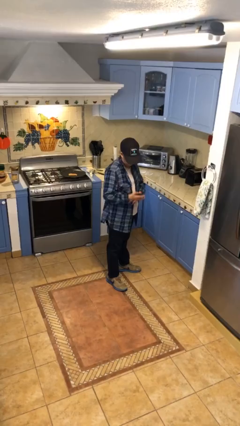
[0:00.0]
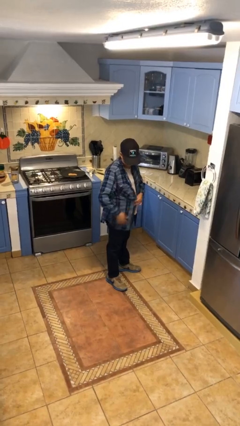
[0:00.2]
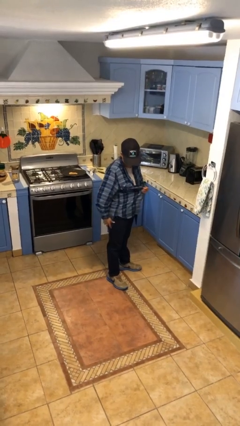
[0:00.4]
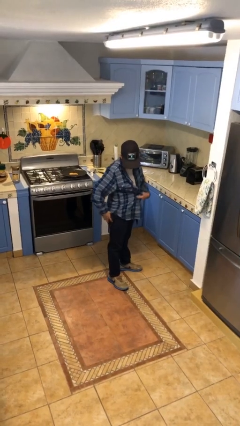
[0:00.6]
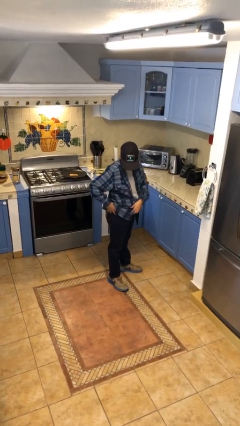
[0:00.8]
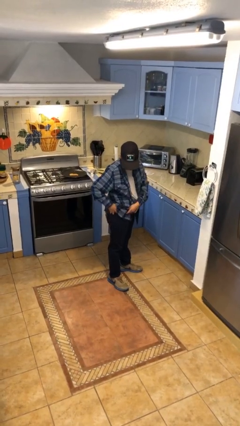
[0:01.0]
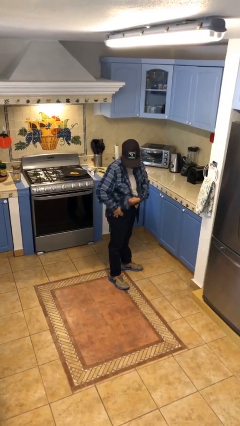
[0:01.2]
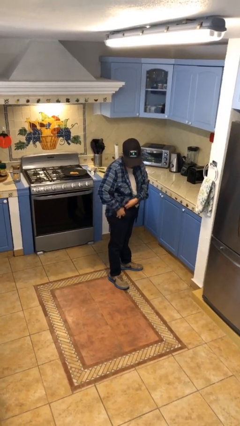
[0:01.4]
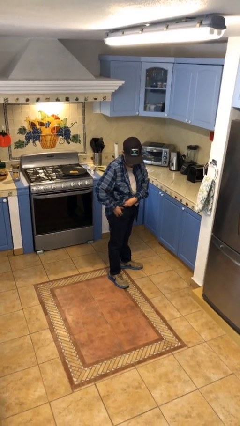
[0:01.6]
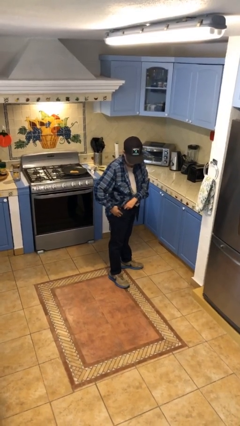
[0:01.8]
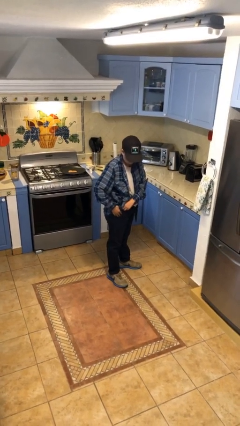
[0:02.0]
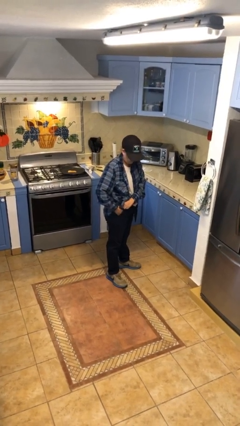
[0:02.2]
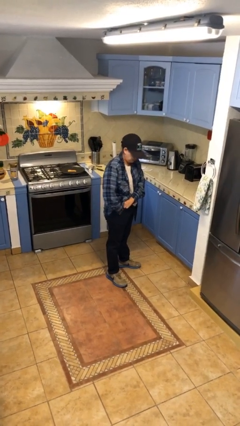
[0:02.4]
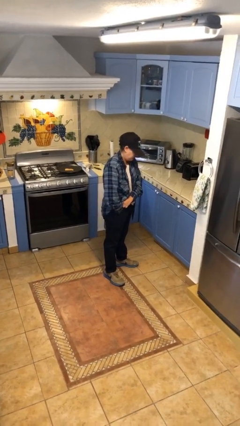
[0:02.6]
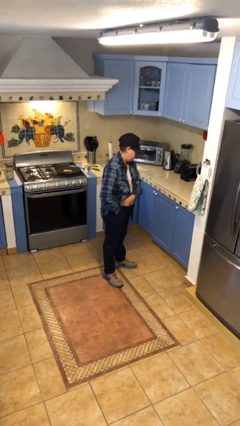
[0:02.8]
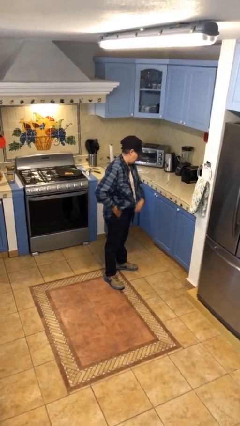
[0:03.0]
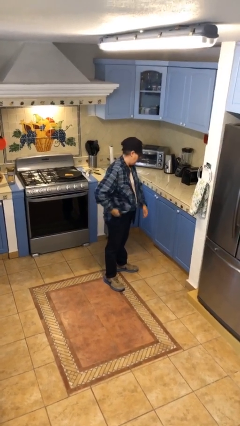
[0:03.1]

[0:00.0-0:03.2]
person puts phone into pocket

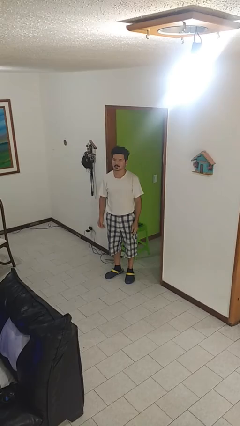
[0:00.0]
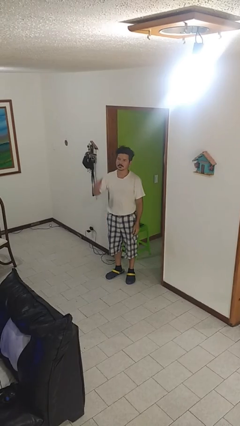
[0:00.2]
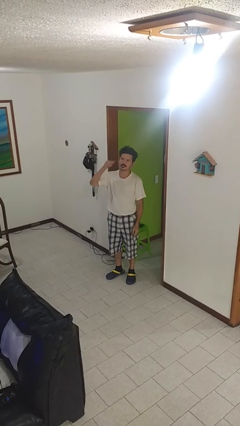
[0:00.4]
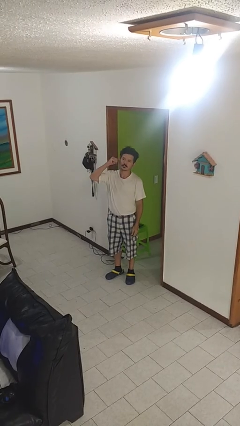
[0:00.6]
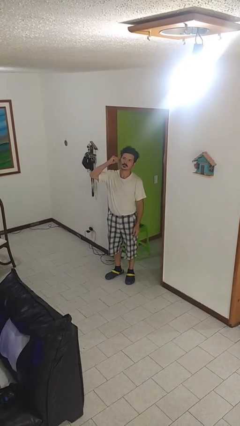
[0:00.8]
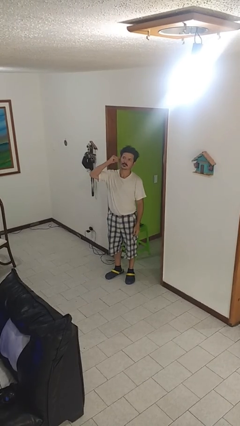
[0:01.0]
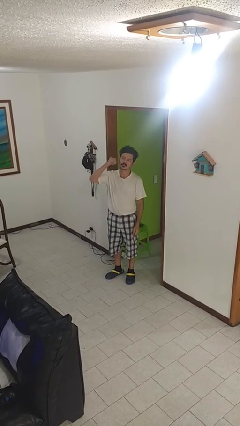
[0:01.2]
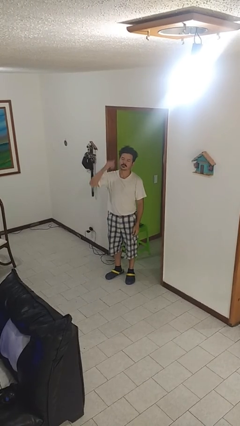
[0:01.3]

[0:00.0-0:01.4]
person gestures call me

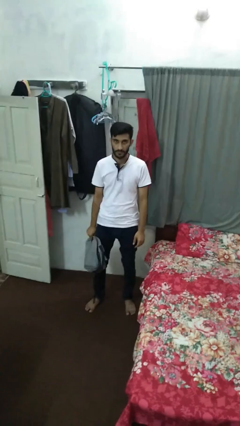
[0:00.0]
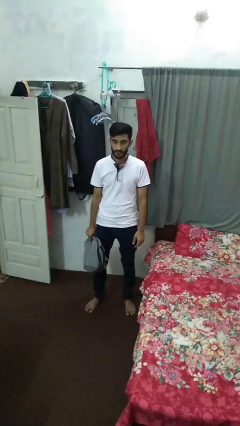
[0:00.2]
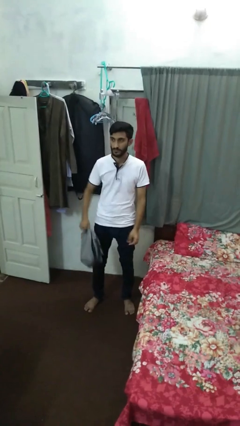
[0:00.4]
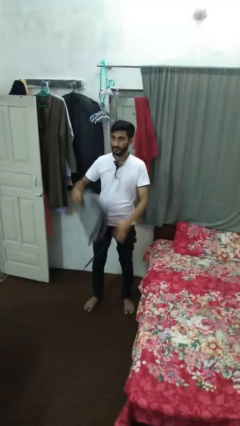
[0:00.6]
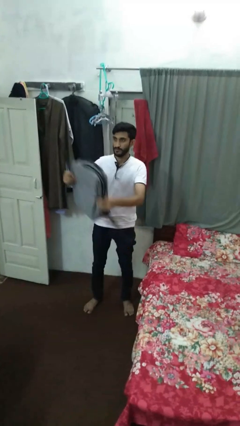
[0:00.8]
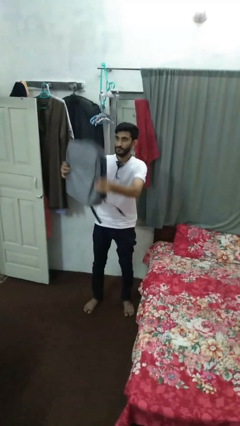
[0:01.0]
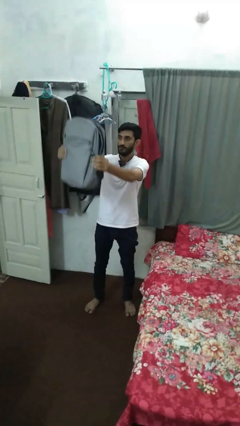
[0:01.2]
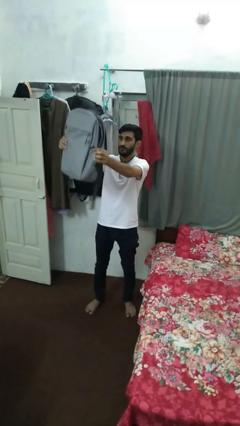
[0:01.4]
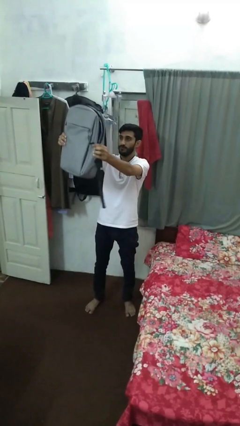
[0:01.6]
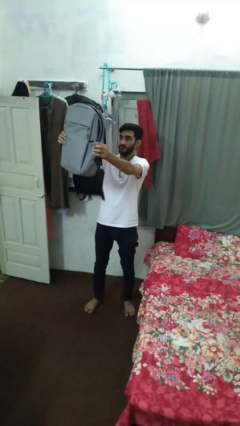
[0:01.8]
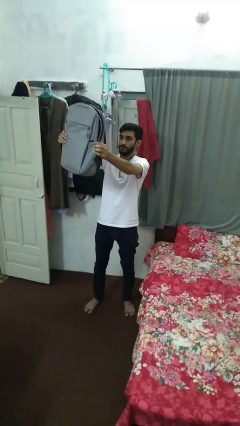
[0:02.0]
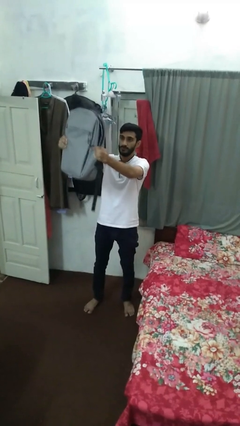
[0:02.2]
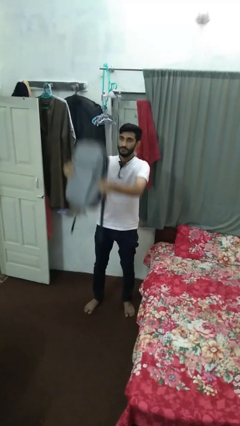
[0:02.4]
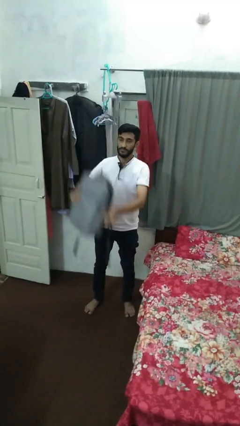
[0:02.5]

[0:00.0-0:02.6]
person holds object above head

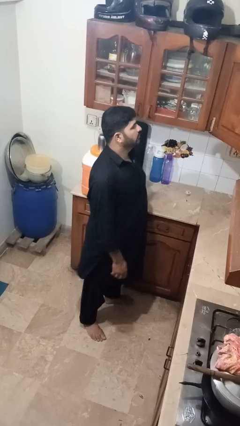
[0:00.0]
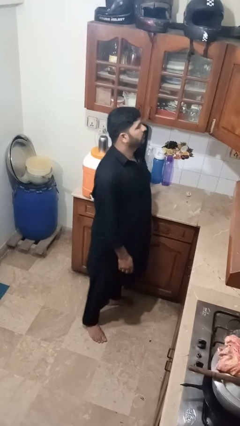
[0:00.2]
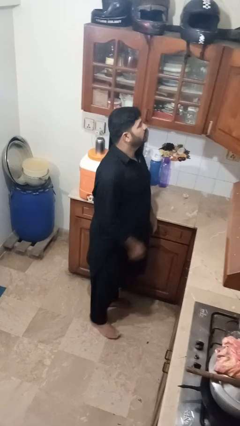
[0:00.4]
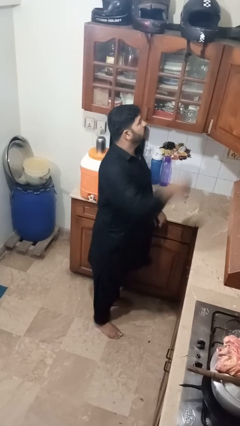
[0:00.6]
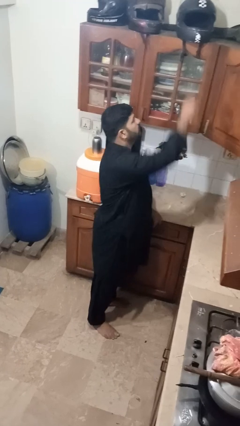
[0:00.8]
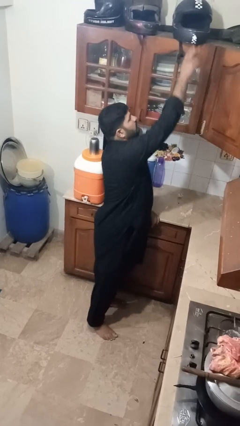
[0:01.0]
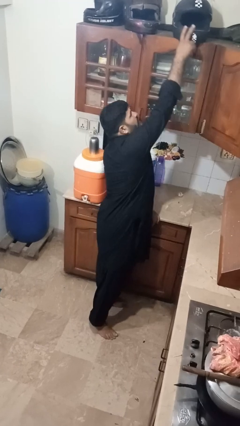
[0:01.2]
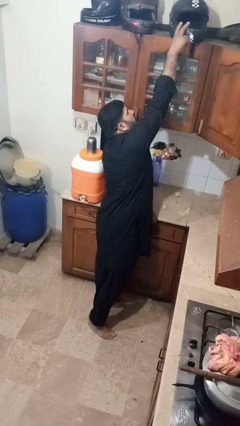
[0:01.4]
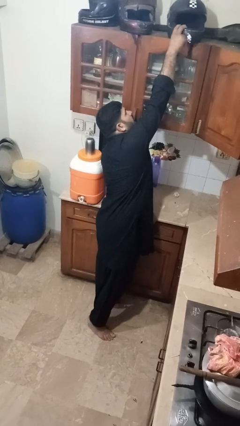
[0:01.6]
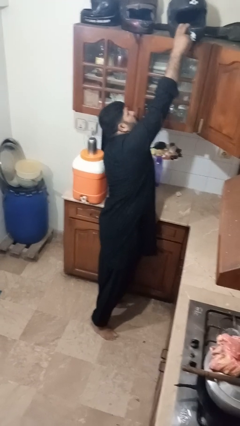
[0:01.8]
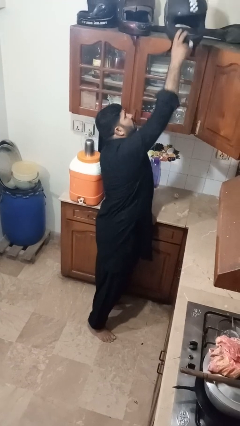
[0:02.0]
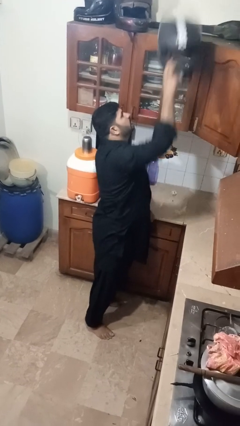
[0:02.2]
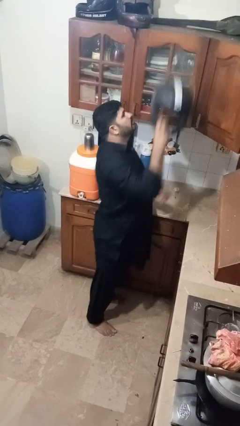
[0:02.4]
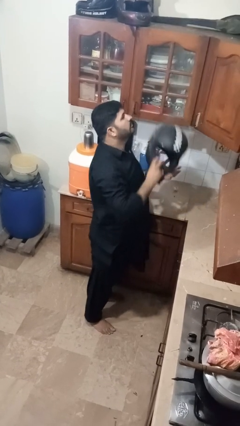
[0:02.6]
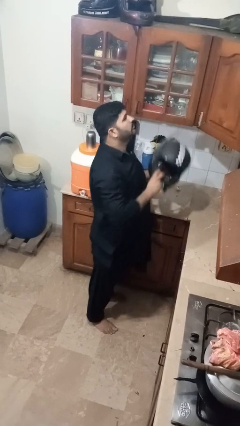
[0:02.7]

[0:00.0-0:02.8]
person picks up object from shelf

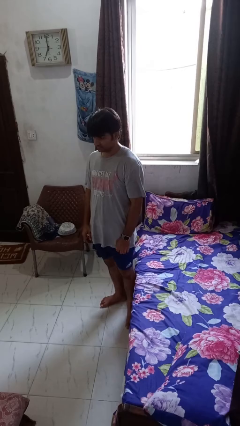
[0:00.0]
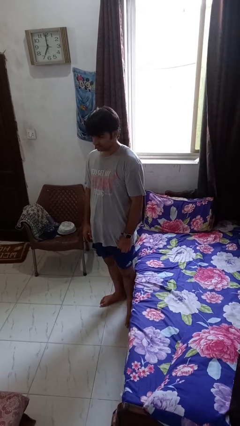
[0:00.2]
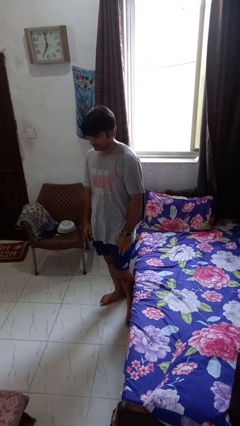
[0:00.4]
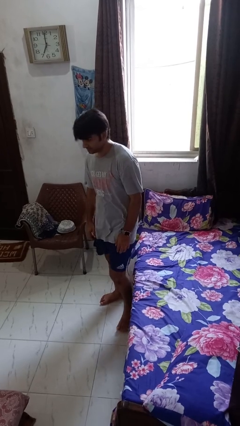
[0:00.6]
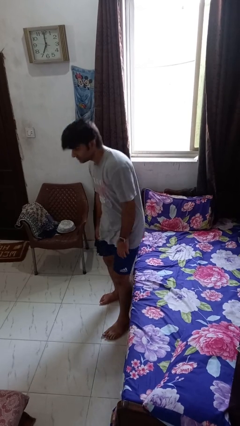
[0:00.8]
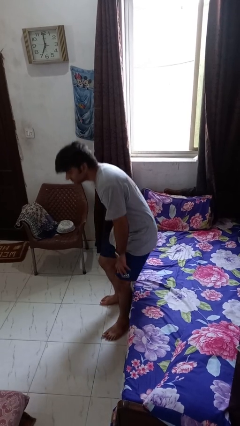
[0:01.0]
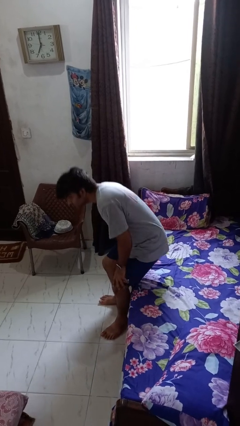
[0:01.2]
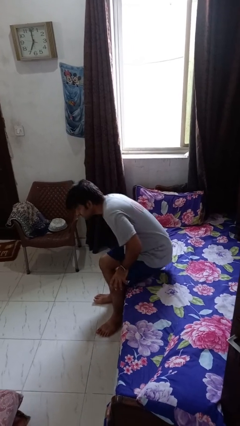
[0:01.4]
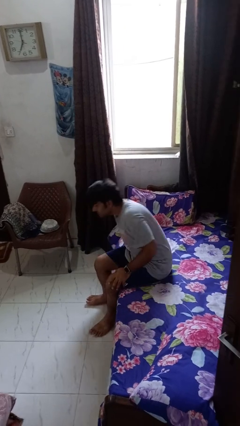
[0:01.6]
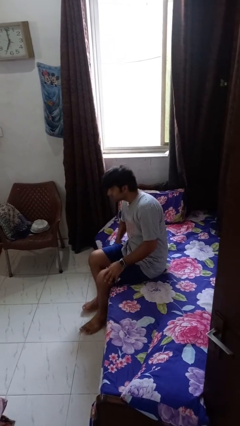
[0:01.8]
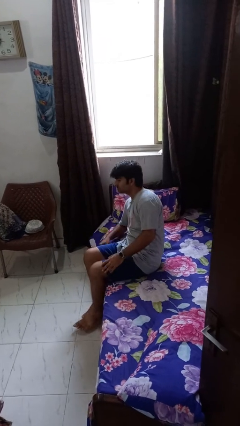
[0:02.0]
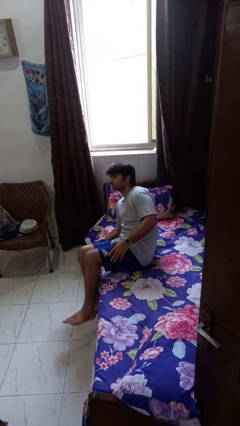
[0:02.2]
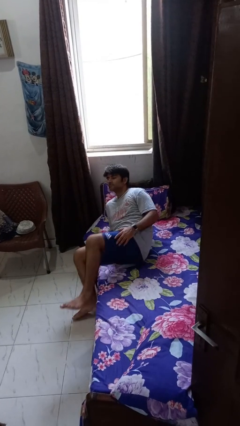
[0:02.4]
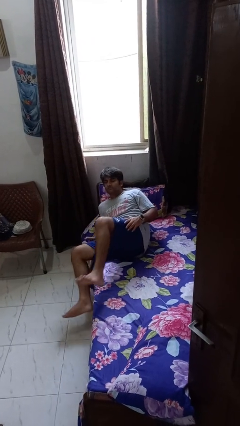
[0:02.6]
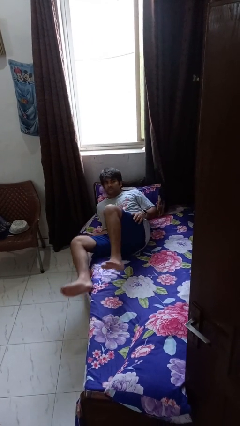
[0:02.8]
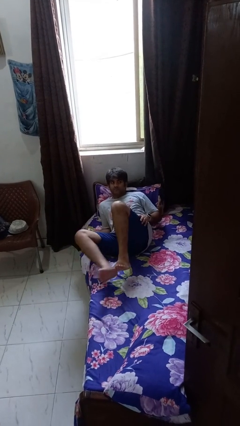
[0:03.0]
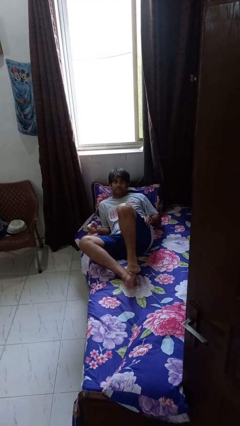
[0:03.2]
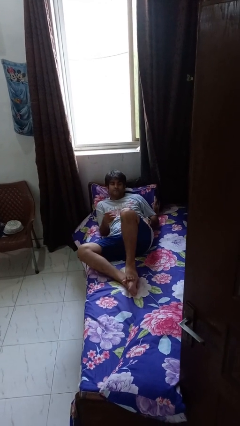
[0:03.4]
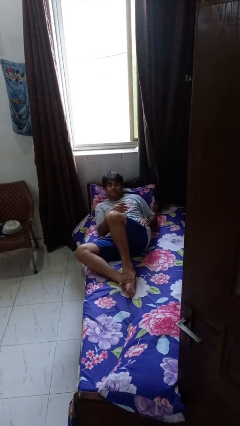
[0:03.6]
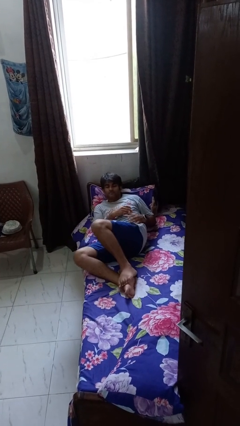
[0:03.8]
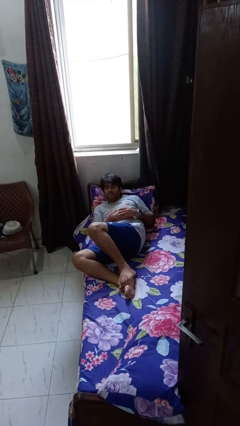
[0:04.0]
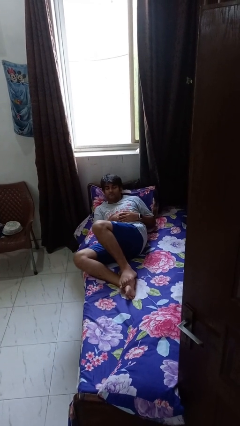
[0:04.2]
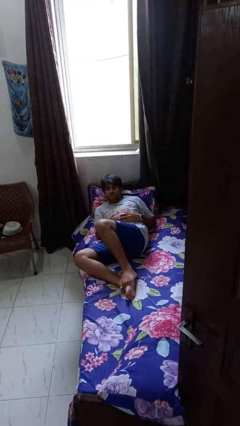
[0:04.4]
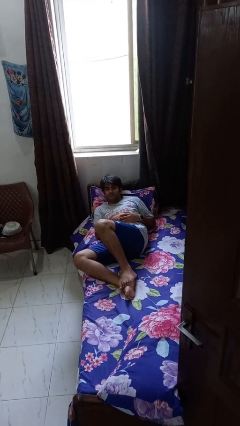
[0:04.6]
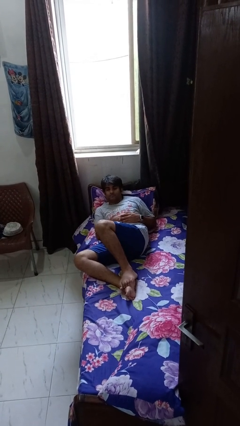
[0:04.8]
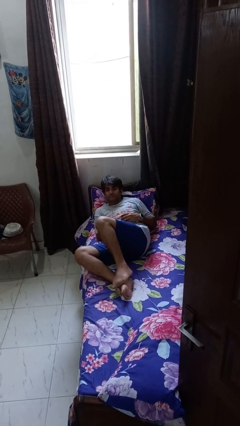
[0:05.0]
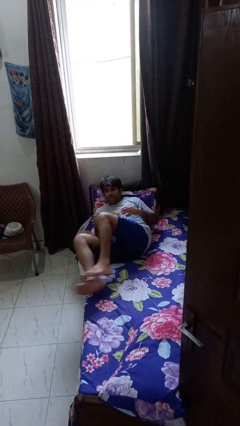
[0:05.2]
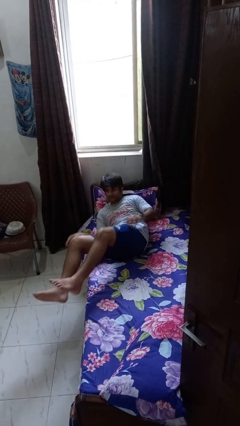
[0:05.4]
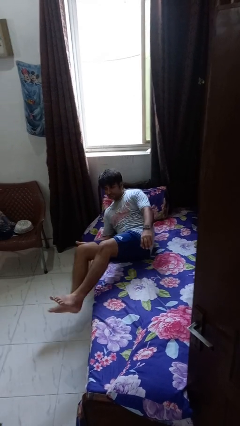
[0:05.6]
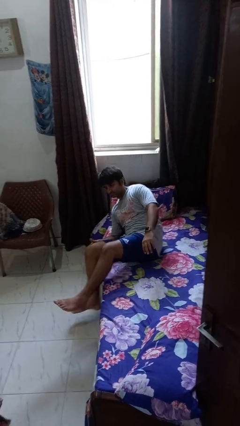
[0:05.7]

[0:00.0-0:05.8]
person lies down on bed

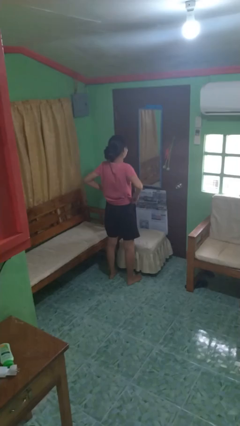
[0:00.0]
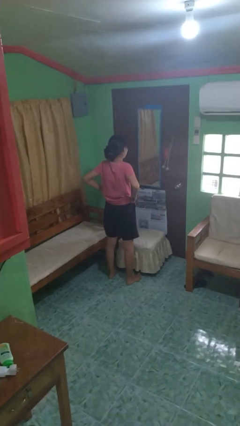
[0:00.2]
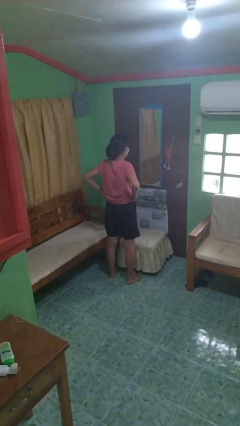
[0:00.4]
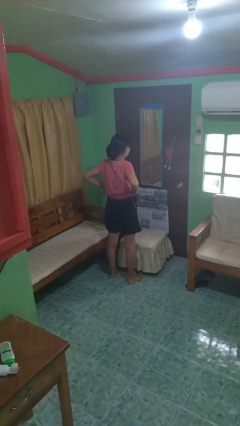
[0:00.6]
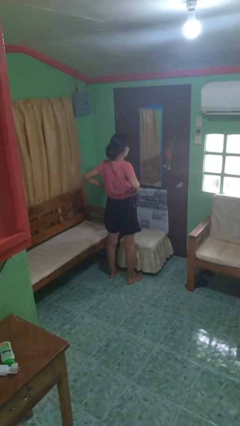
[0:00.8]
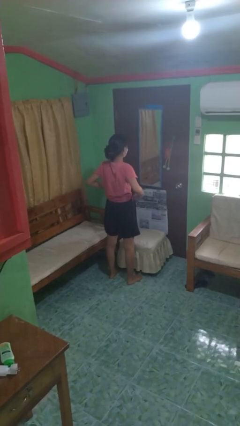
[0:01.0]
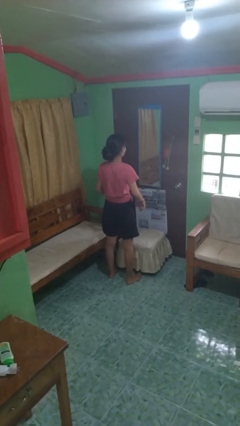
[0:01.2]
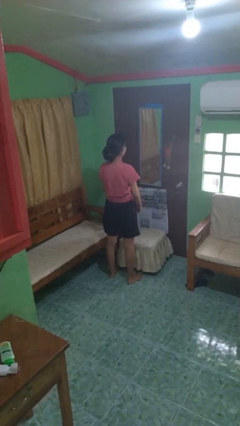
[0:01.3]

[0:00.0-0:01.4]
person hikes up pants
